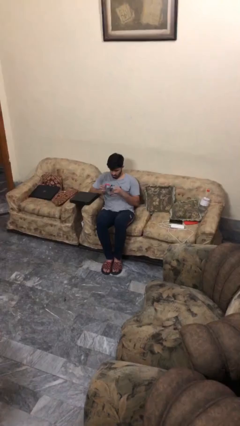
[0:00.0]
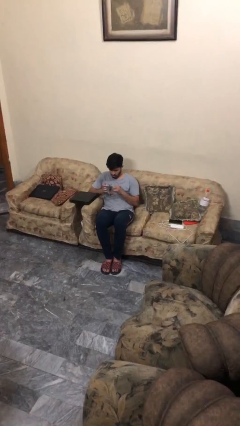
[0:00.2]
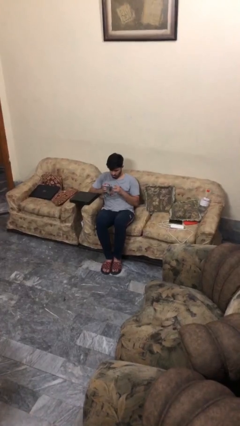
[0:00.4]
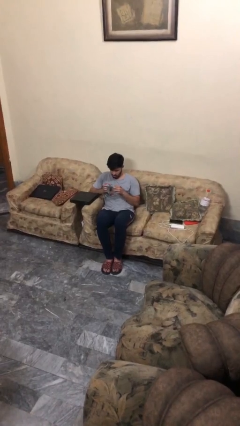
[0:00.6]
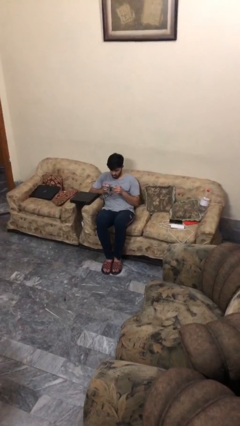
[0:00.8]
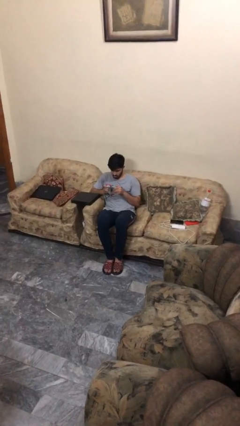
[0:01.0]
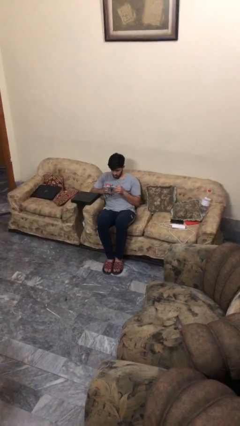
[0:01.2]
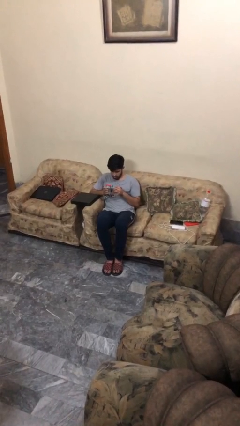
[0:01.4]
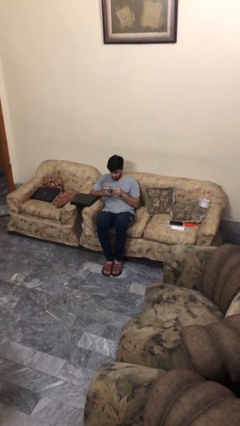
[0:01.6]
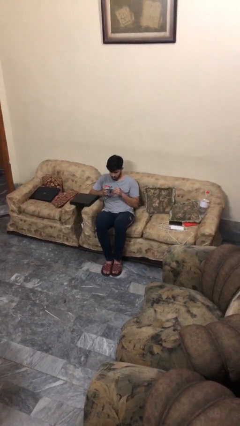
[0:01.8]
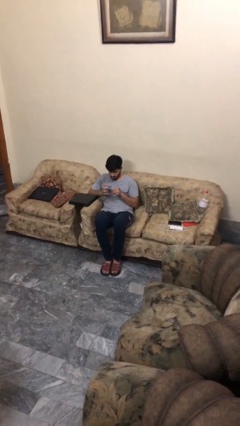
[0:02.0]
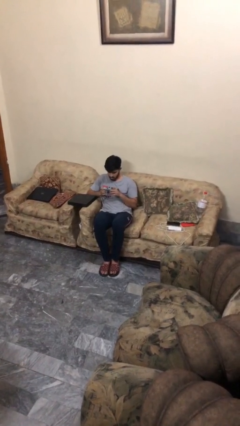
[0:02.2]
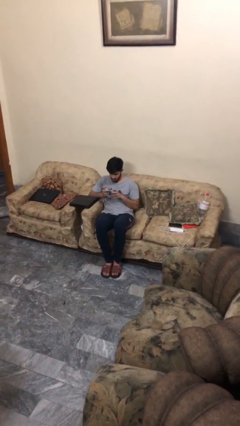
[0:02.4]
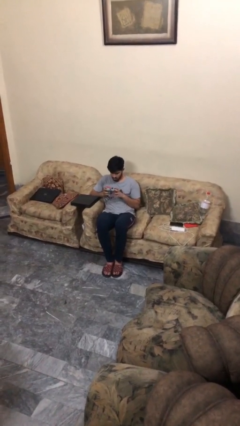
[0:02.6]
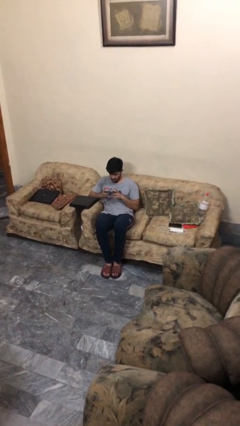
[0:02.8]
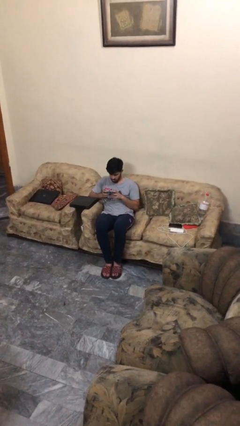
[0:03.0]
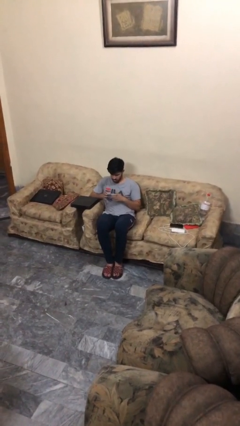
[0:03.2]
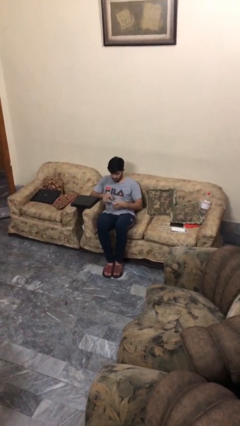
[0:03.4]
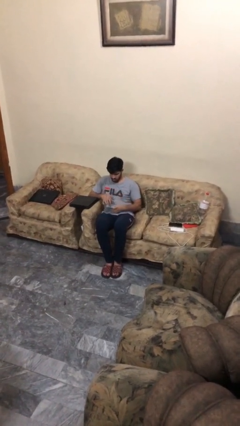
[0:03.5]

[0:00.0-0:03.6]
person interacts with handheld game

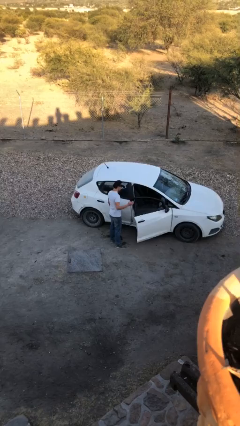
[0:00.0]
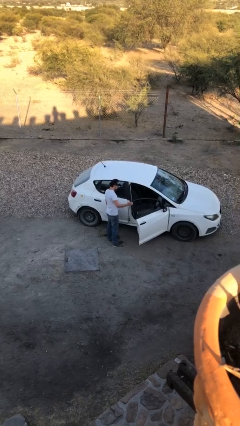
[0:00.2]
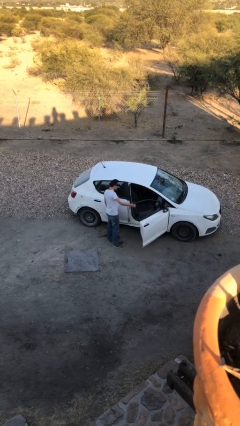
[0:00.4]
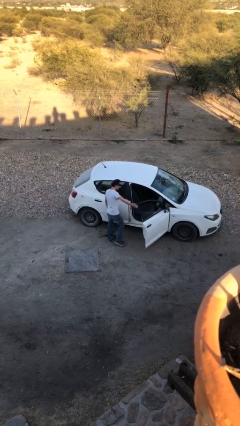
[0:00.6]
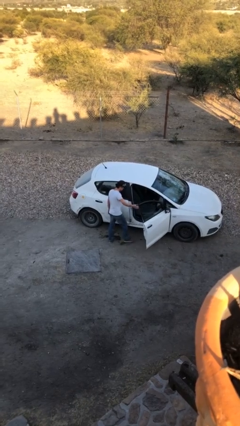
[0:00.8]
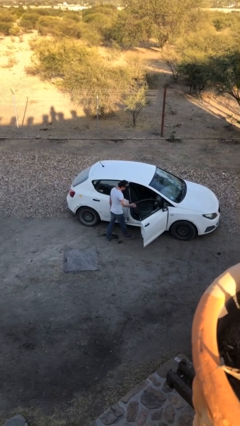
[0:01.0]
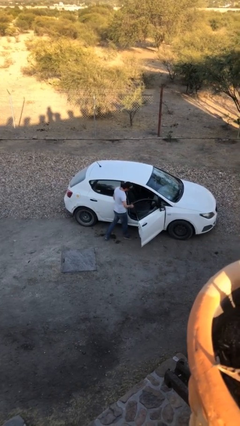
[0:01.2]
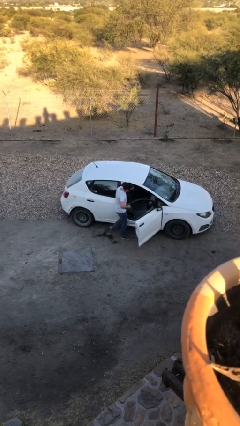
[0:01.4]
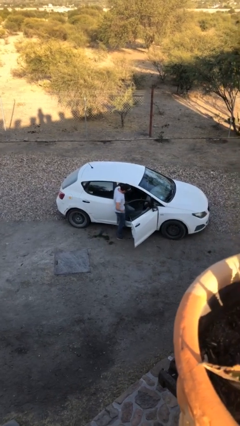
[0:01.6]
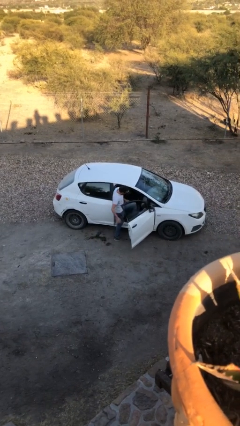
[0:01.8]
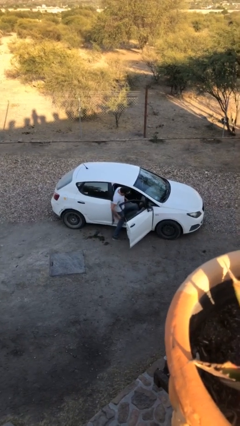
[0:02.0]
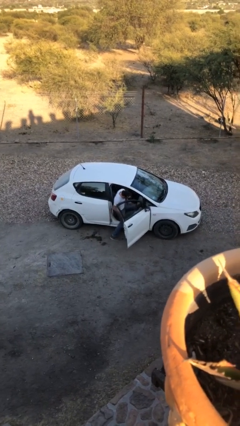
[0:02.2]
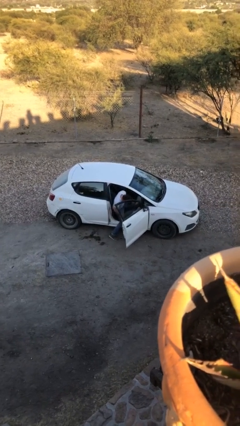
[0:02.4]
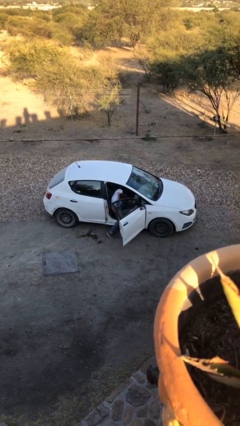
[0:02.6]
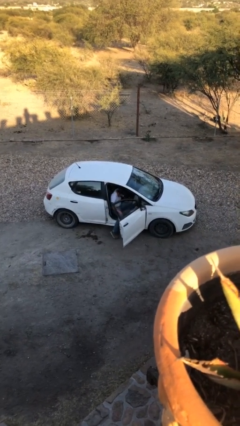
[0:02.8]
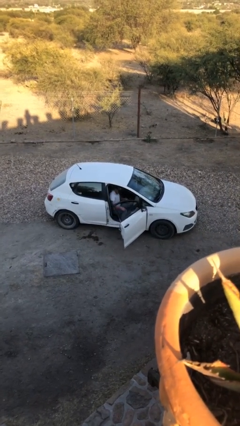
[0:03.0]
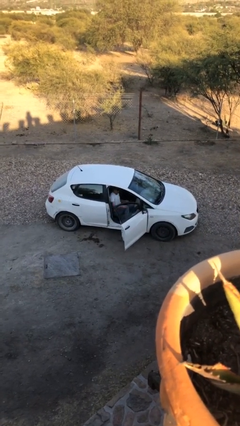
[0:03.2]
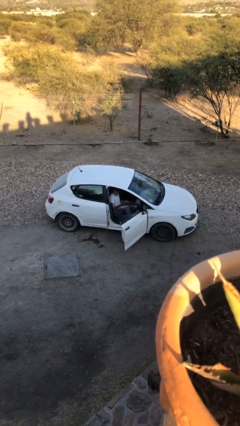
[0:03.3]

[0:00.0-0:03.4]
person enters car

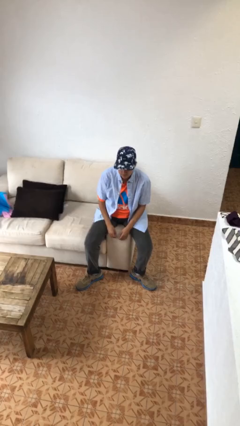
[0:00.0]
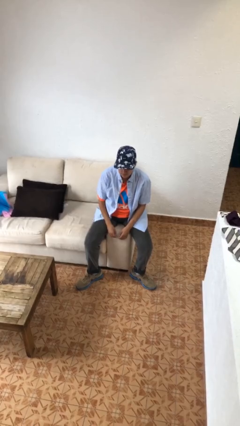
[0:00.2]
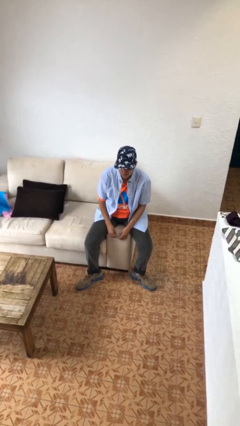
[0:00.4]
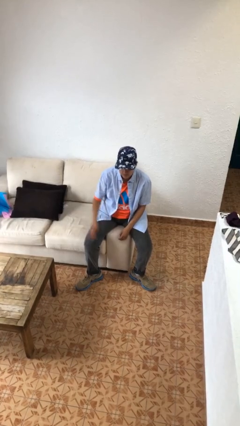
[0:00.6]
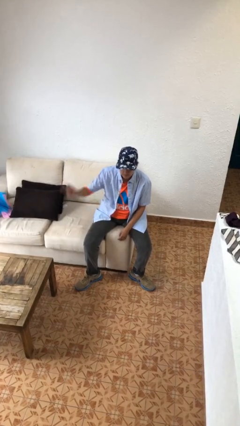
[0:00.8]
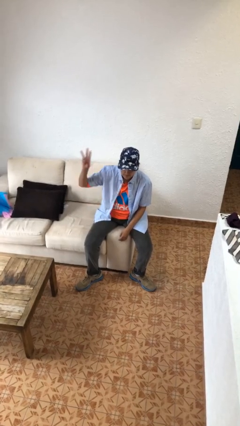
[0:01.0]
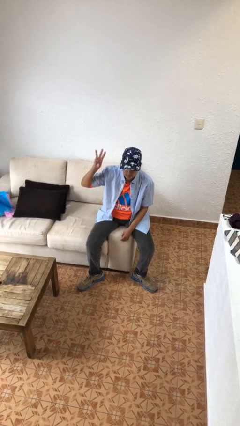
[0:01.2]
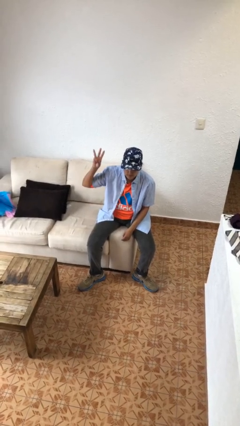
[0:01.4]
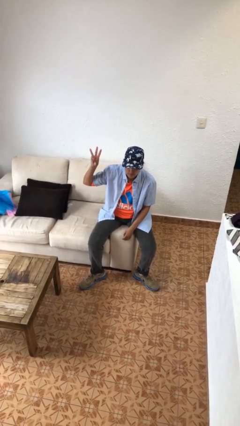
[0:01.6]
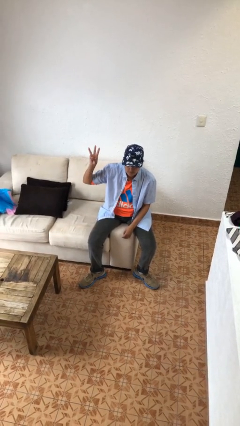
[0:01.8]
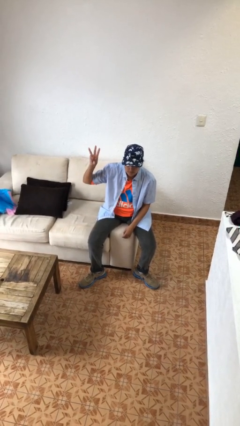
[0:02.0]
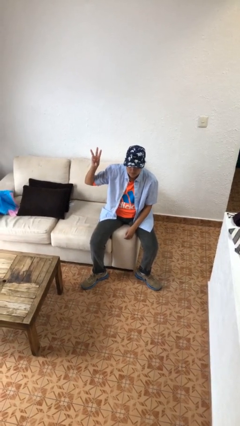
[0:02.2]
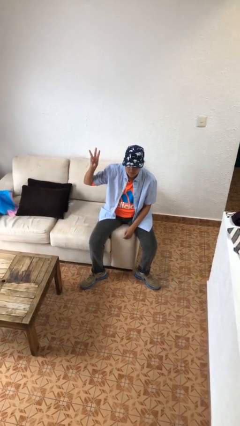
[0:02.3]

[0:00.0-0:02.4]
person gestures number three

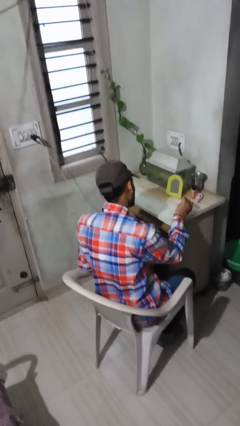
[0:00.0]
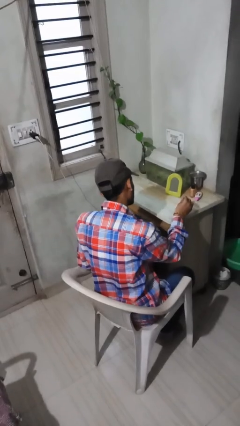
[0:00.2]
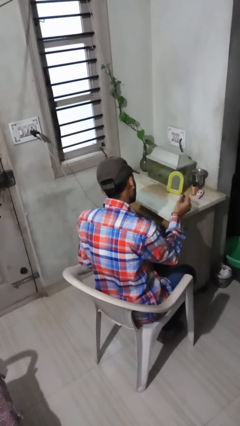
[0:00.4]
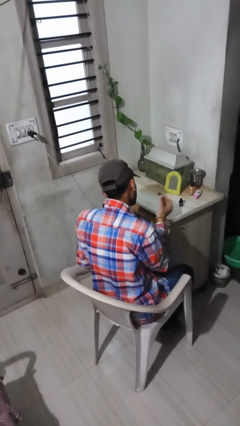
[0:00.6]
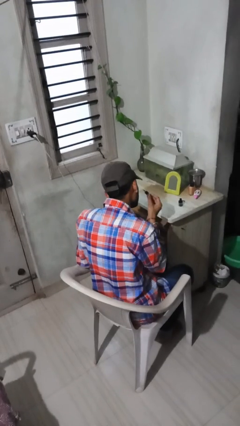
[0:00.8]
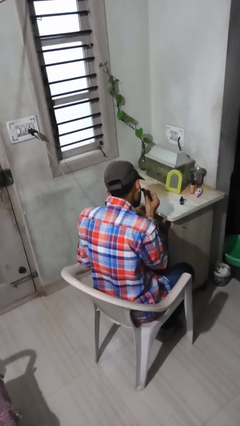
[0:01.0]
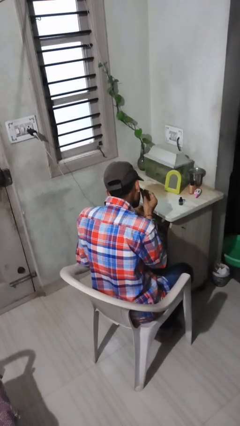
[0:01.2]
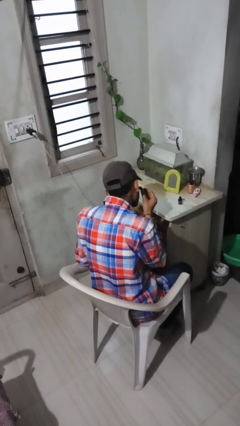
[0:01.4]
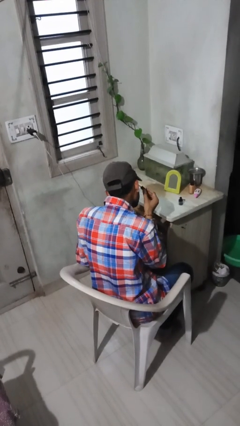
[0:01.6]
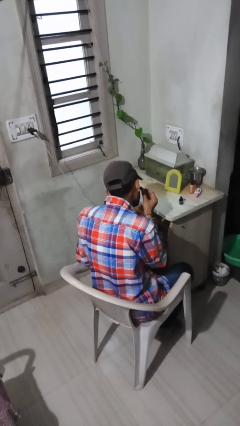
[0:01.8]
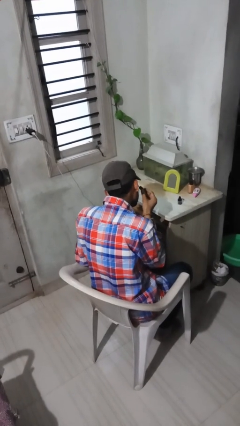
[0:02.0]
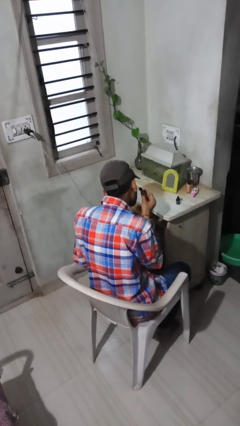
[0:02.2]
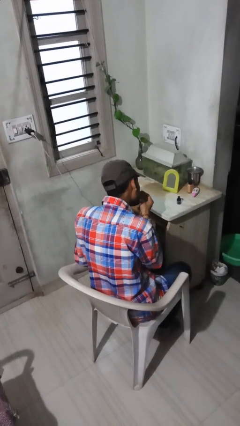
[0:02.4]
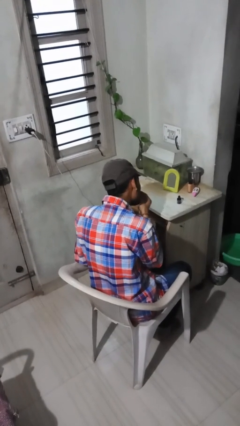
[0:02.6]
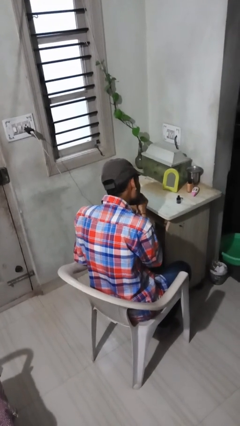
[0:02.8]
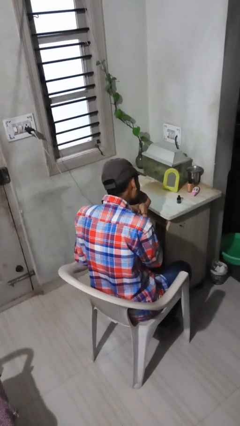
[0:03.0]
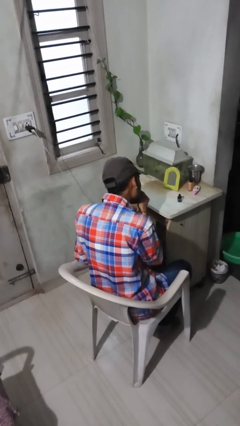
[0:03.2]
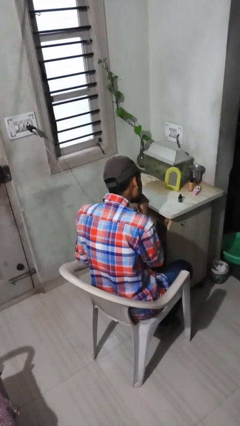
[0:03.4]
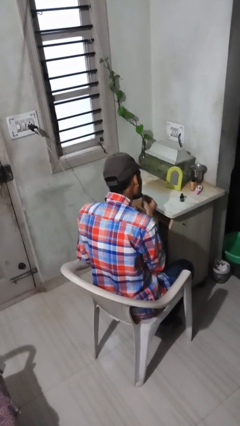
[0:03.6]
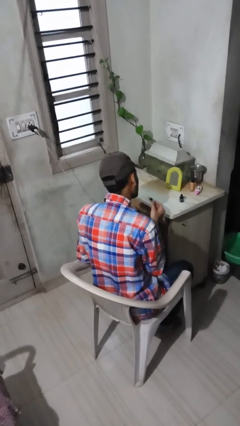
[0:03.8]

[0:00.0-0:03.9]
person applies eye makeup

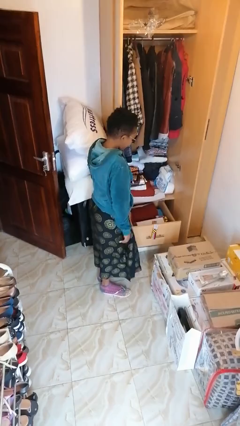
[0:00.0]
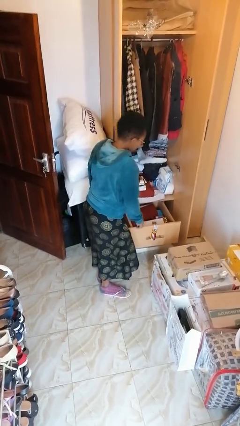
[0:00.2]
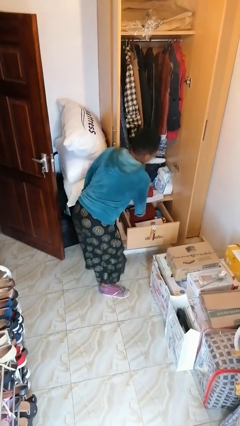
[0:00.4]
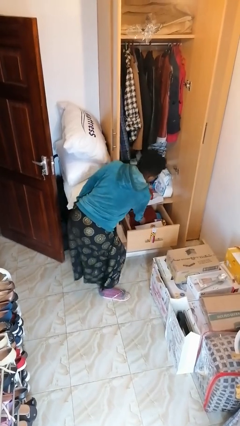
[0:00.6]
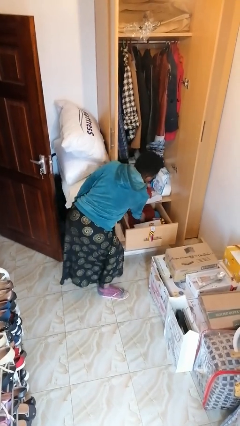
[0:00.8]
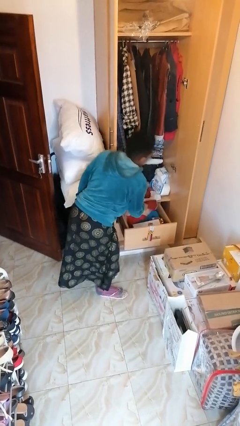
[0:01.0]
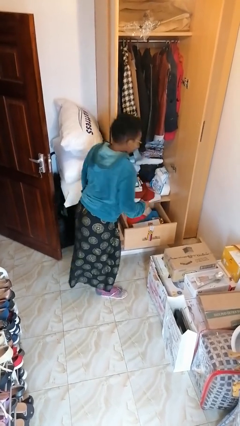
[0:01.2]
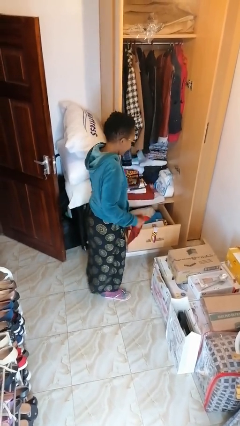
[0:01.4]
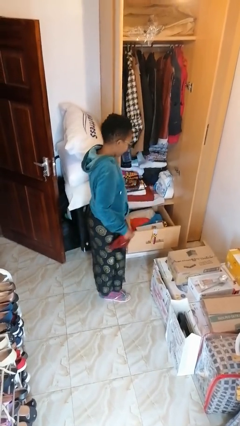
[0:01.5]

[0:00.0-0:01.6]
person takes clothes from dresser

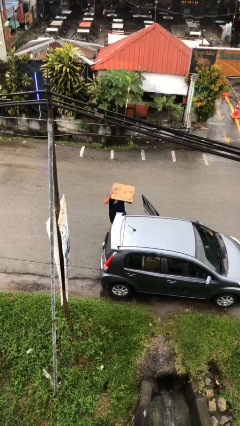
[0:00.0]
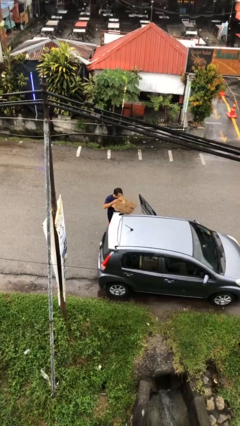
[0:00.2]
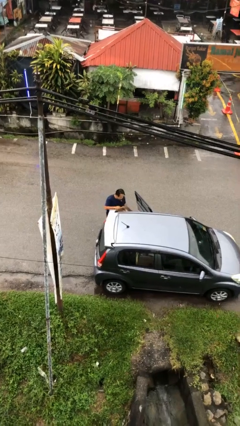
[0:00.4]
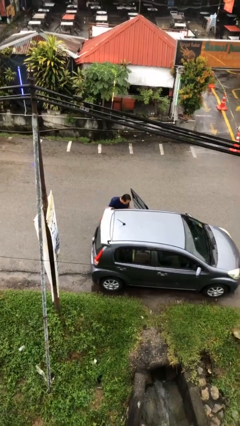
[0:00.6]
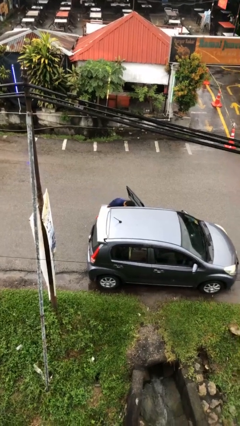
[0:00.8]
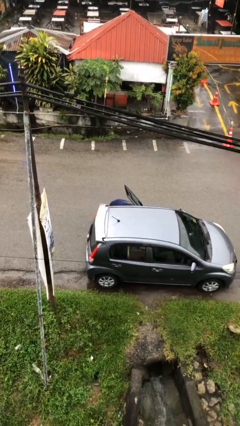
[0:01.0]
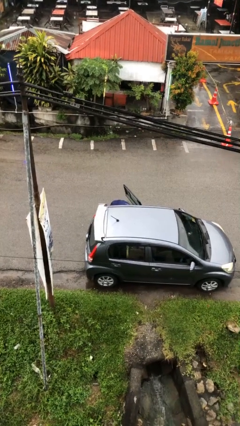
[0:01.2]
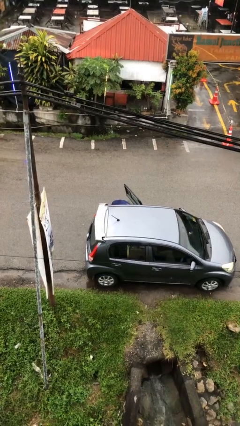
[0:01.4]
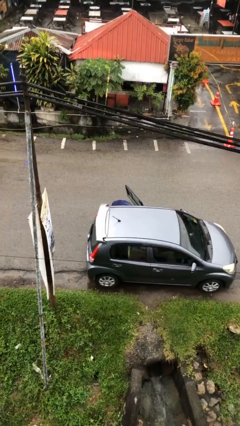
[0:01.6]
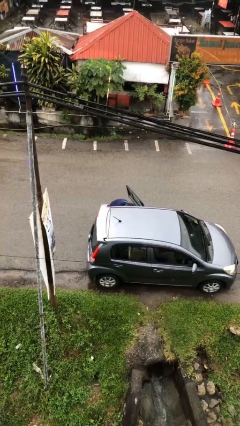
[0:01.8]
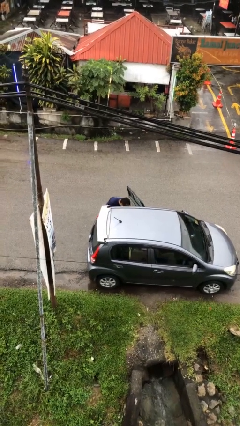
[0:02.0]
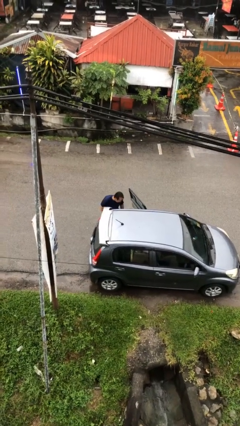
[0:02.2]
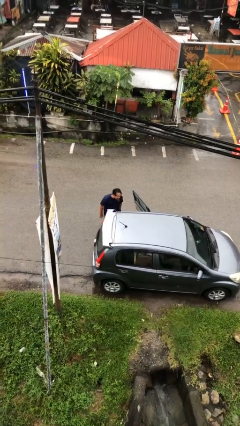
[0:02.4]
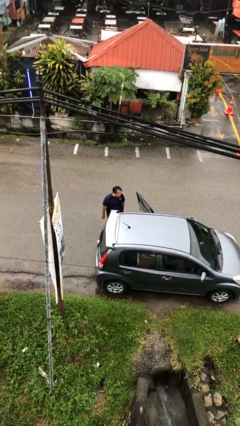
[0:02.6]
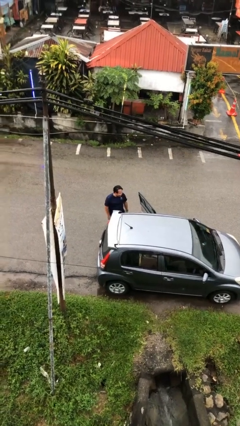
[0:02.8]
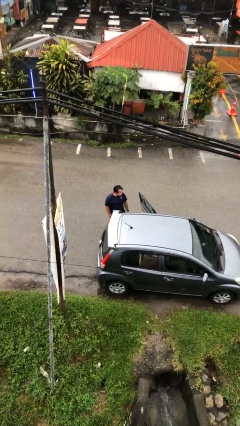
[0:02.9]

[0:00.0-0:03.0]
person loads car
